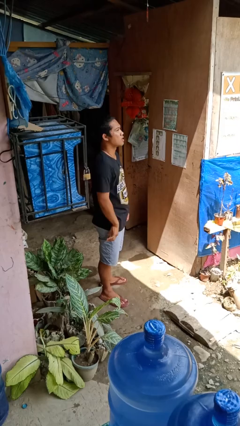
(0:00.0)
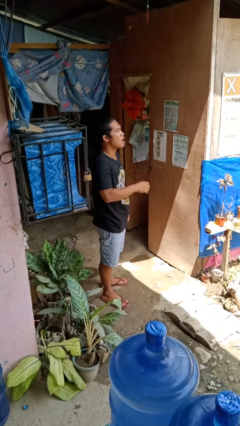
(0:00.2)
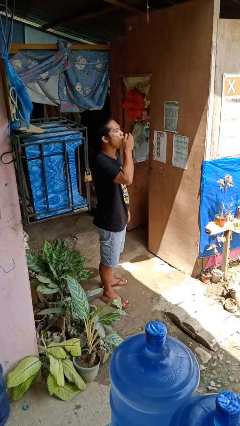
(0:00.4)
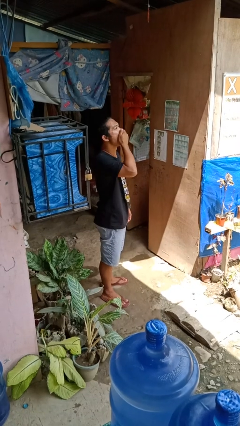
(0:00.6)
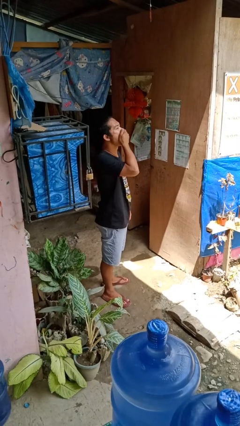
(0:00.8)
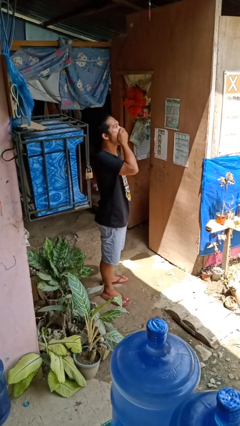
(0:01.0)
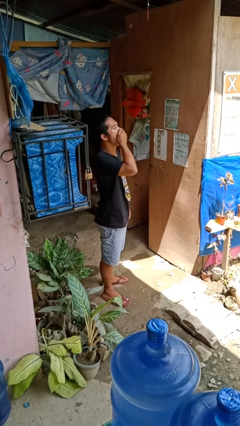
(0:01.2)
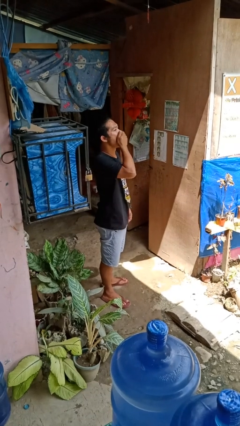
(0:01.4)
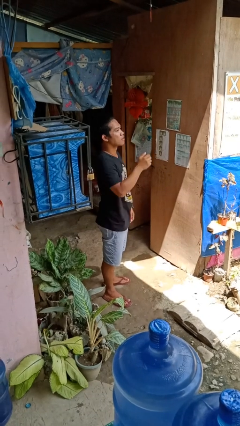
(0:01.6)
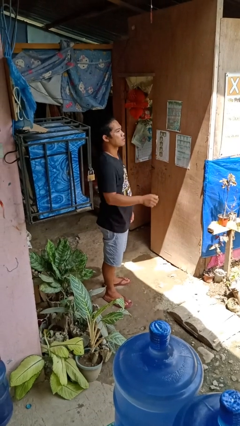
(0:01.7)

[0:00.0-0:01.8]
person yawns

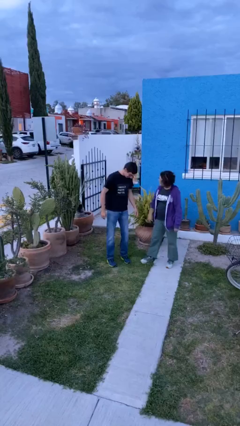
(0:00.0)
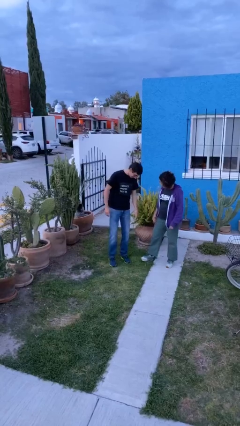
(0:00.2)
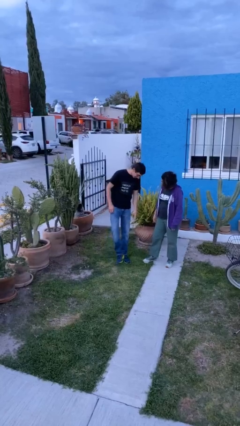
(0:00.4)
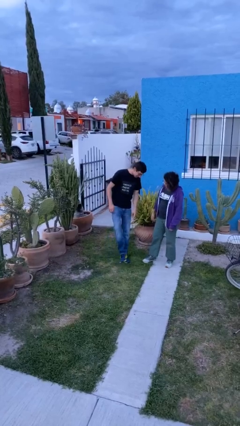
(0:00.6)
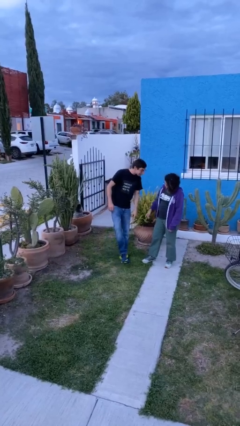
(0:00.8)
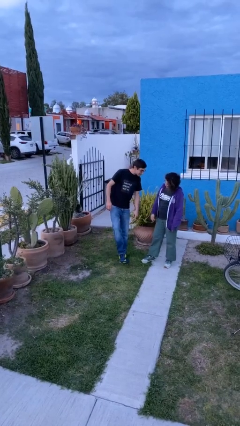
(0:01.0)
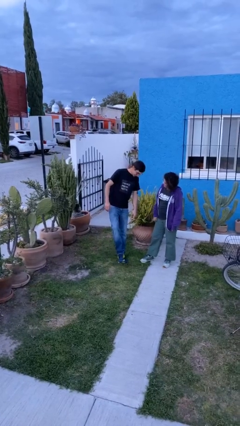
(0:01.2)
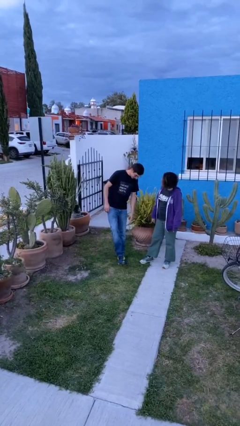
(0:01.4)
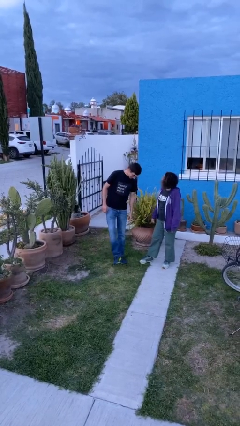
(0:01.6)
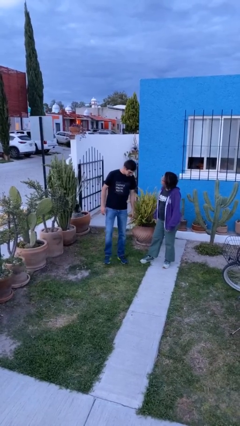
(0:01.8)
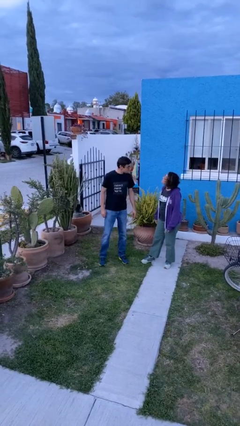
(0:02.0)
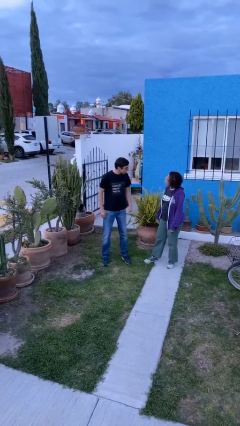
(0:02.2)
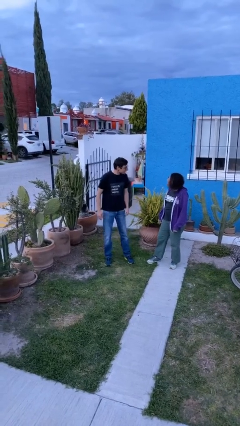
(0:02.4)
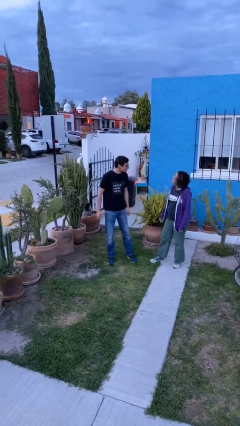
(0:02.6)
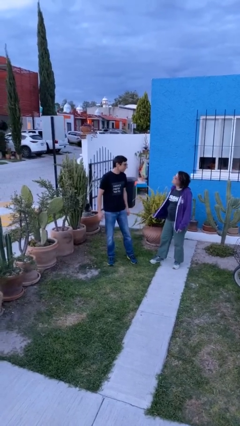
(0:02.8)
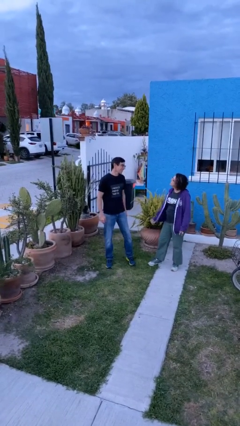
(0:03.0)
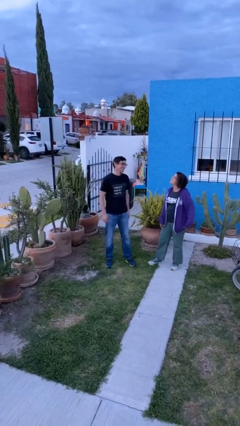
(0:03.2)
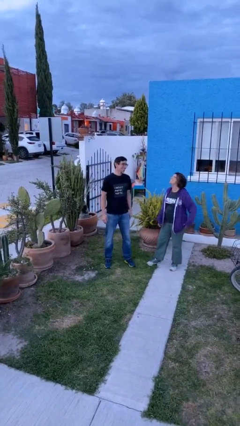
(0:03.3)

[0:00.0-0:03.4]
person talks to person

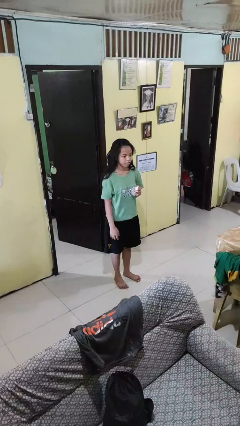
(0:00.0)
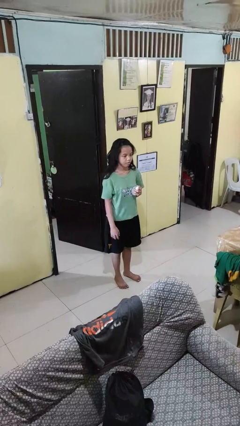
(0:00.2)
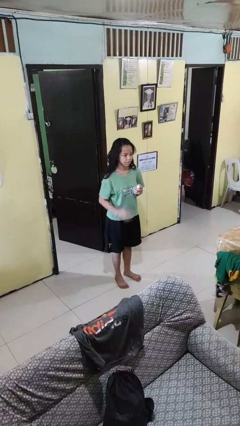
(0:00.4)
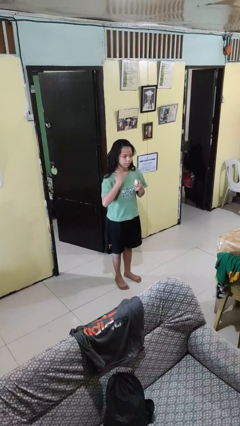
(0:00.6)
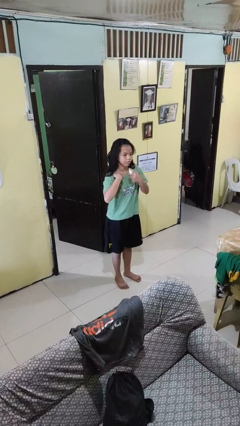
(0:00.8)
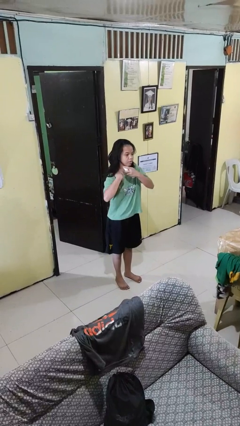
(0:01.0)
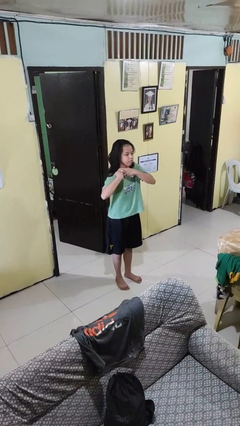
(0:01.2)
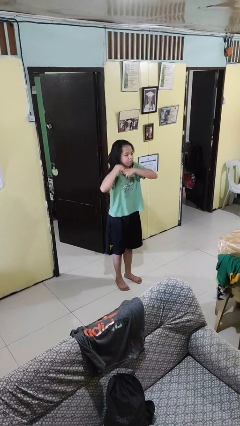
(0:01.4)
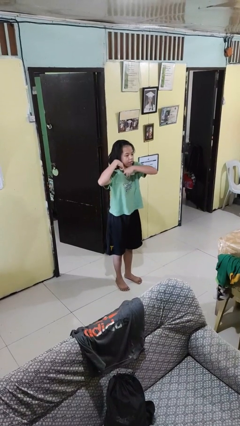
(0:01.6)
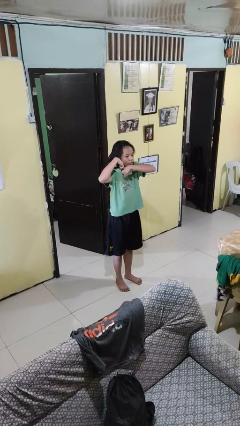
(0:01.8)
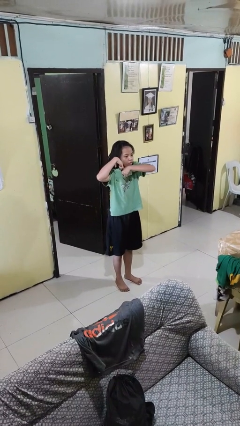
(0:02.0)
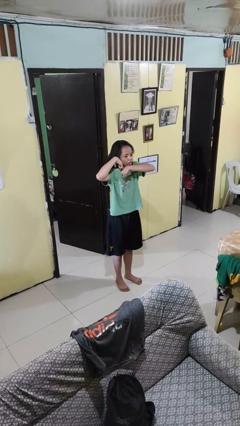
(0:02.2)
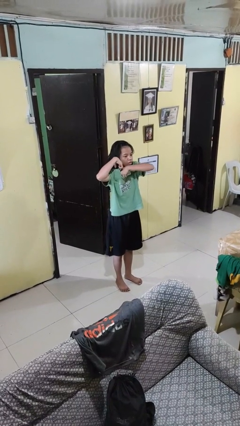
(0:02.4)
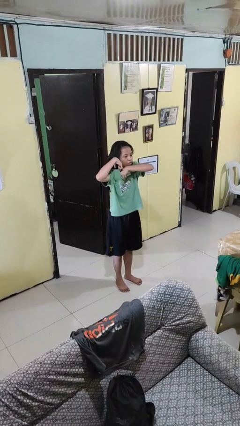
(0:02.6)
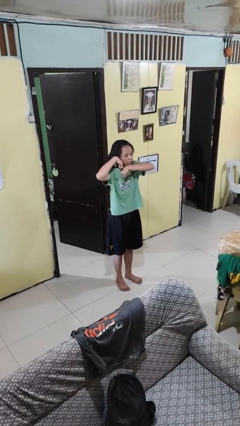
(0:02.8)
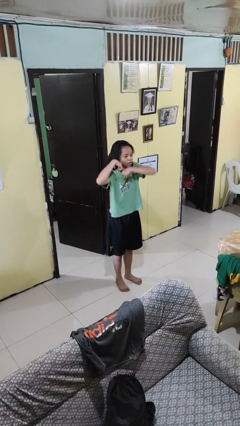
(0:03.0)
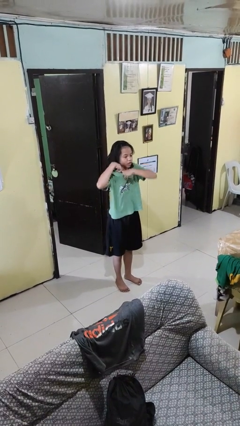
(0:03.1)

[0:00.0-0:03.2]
person applies deodorant

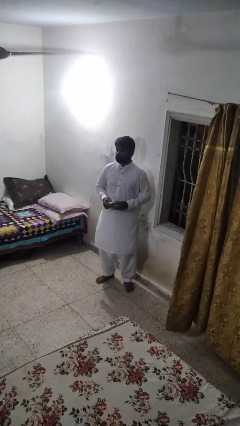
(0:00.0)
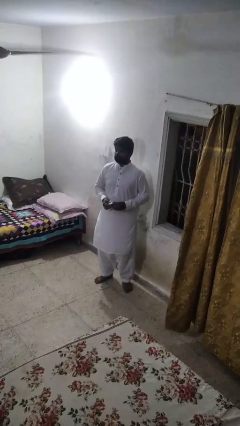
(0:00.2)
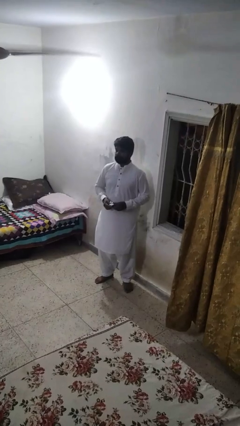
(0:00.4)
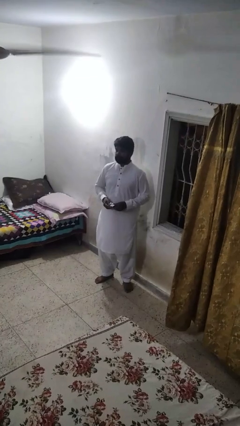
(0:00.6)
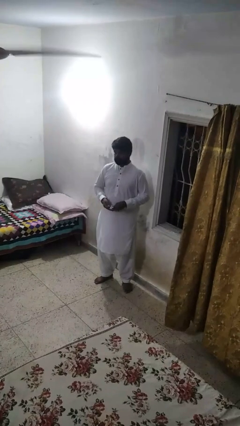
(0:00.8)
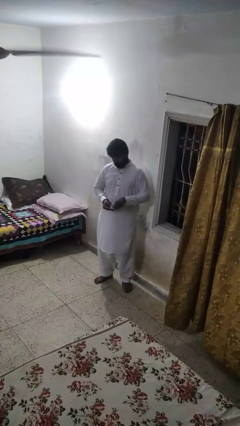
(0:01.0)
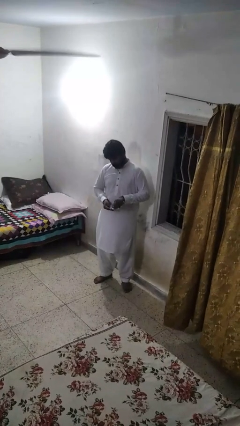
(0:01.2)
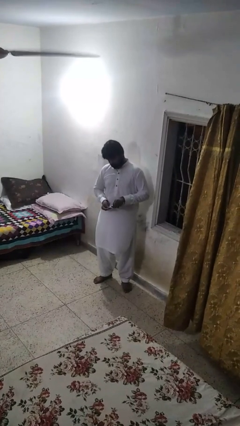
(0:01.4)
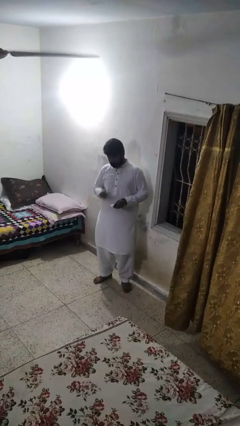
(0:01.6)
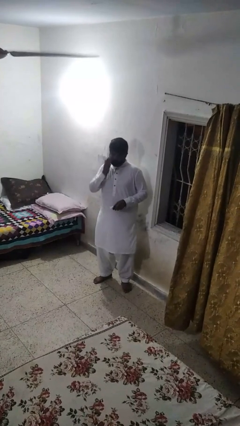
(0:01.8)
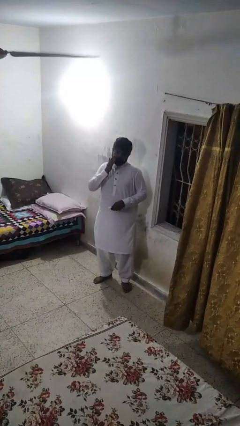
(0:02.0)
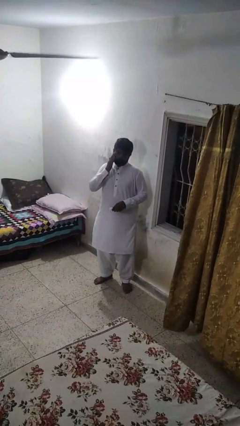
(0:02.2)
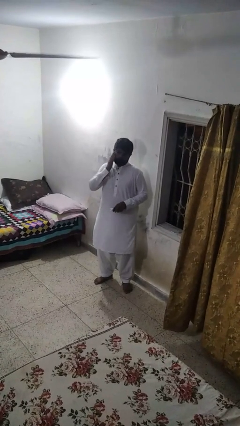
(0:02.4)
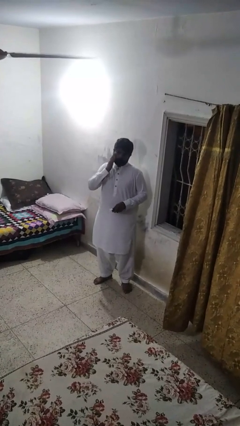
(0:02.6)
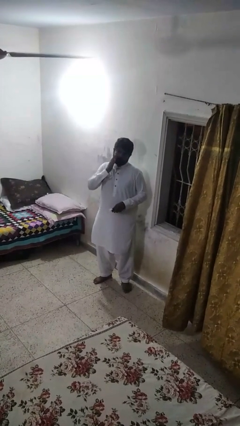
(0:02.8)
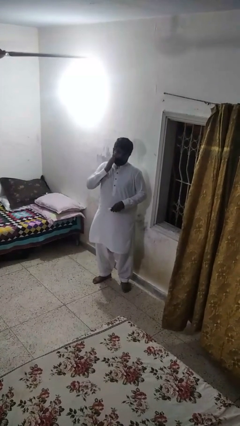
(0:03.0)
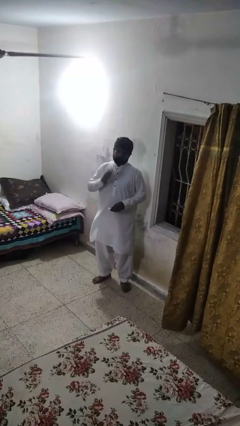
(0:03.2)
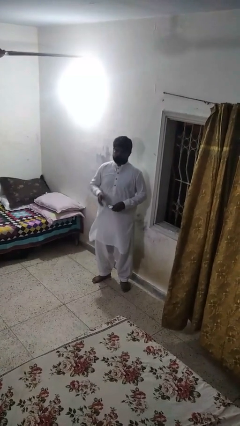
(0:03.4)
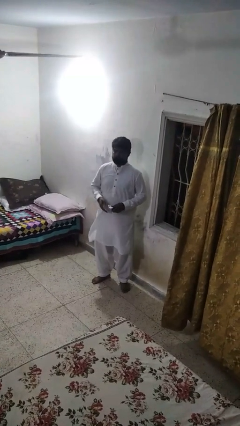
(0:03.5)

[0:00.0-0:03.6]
person applies shaving cream

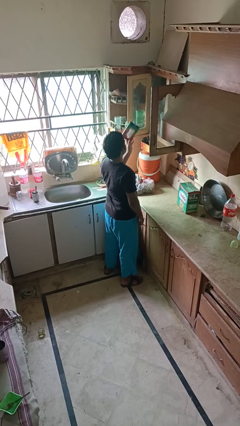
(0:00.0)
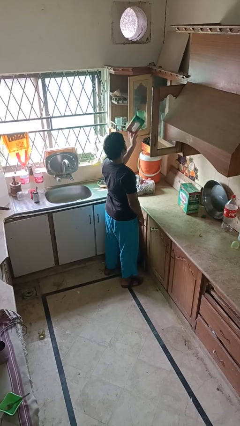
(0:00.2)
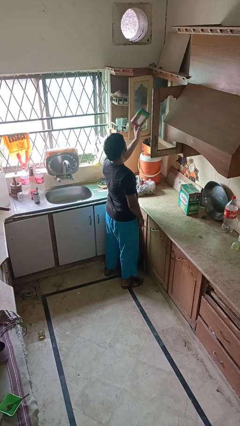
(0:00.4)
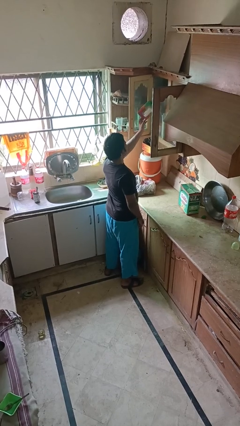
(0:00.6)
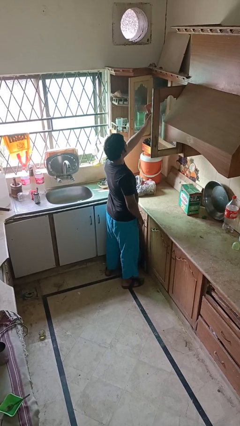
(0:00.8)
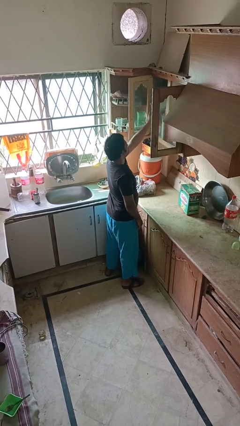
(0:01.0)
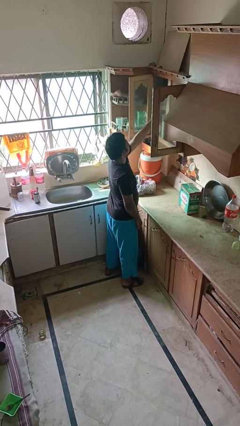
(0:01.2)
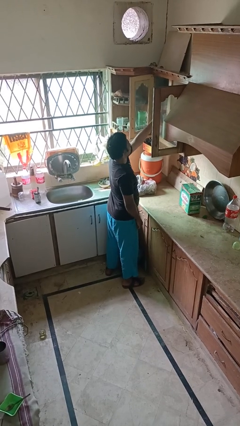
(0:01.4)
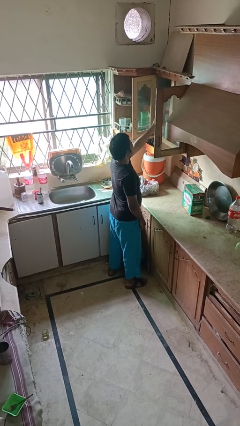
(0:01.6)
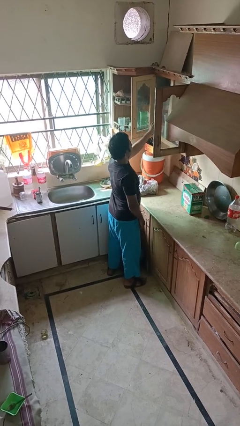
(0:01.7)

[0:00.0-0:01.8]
person puts down object into cabinet

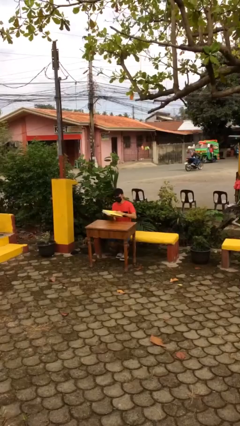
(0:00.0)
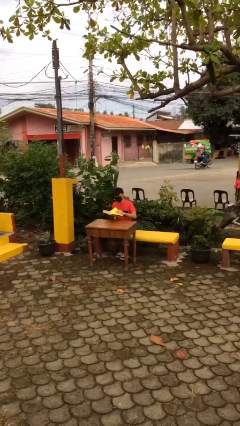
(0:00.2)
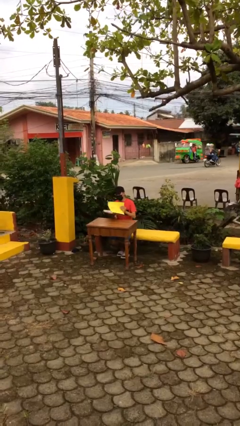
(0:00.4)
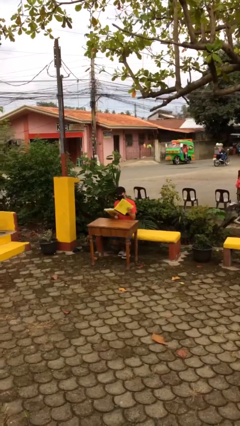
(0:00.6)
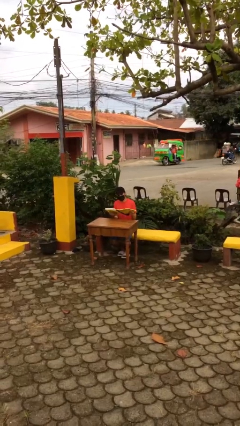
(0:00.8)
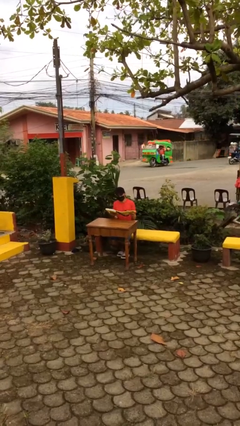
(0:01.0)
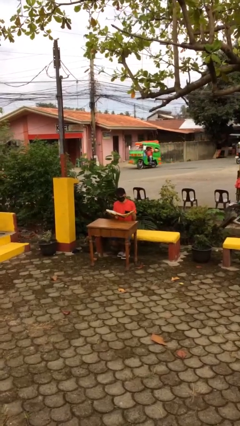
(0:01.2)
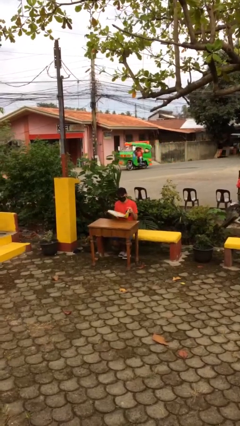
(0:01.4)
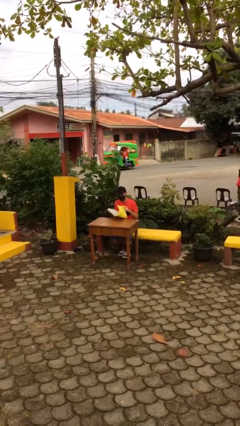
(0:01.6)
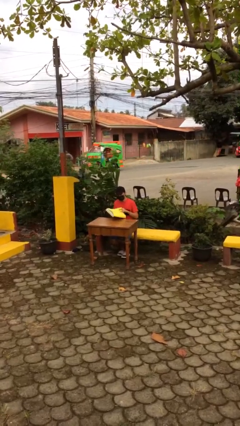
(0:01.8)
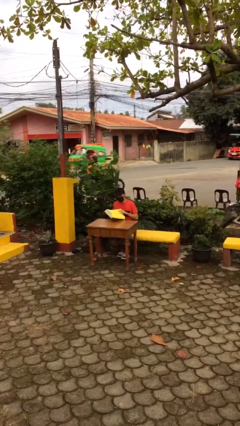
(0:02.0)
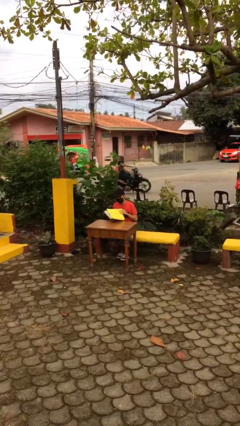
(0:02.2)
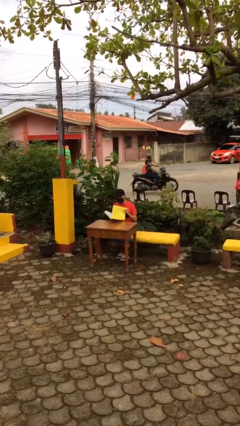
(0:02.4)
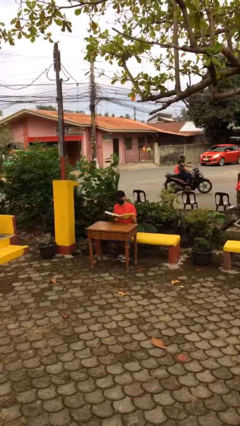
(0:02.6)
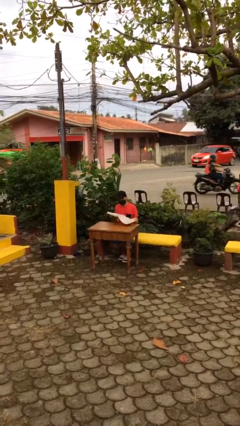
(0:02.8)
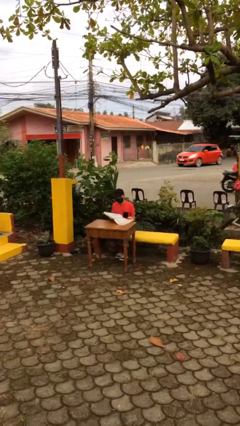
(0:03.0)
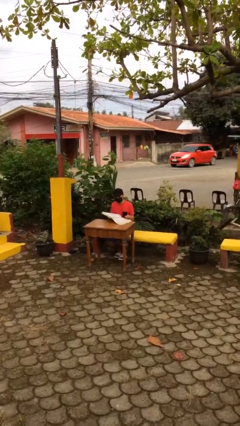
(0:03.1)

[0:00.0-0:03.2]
person reads document

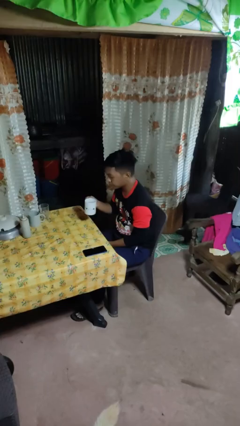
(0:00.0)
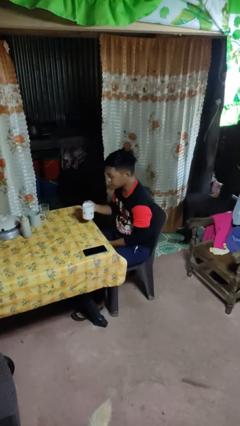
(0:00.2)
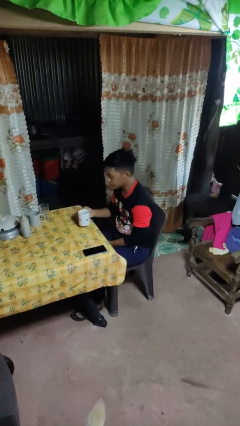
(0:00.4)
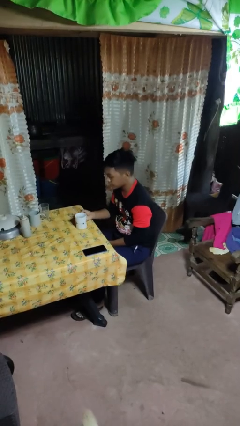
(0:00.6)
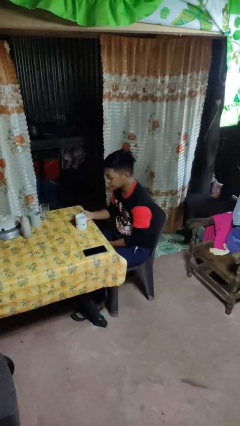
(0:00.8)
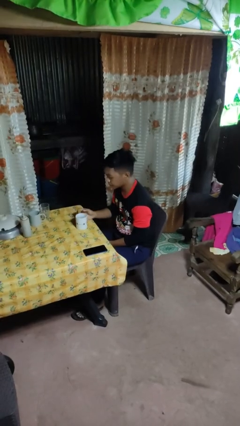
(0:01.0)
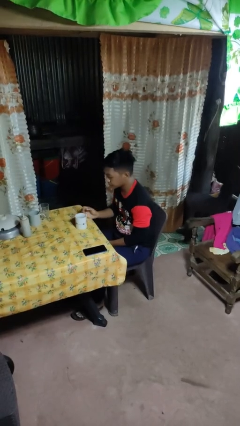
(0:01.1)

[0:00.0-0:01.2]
person puts down object on table
